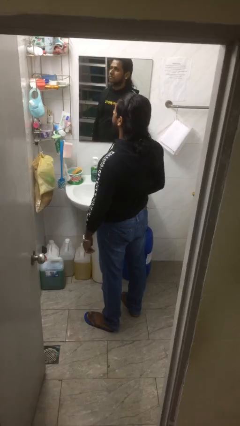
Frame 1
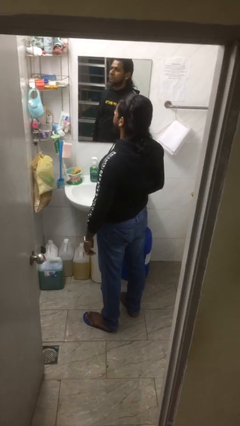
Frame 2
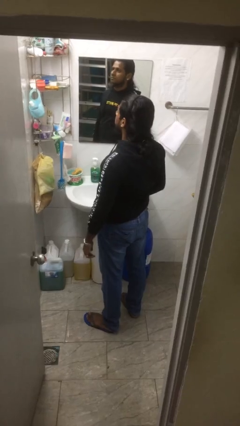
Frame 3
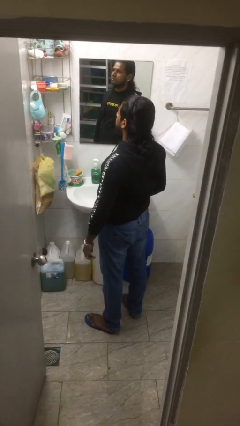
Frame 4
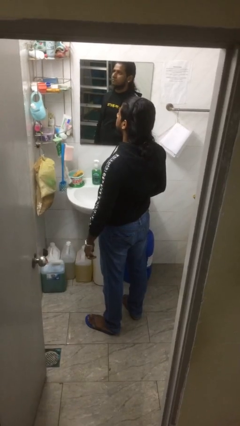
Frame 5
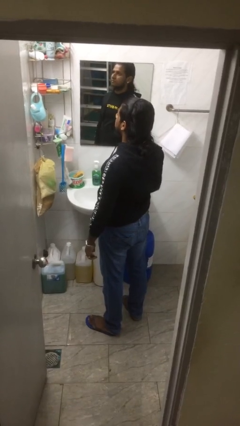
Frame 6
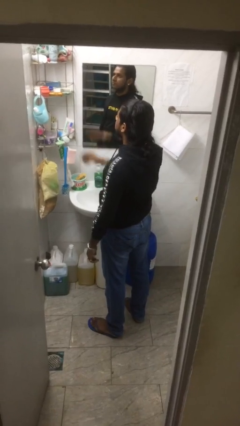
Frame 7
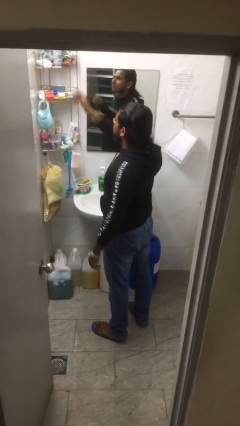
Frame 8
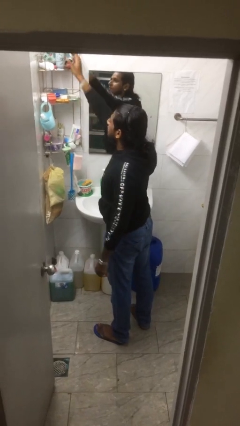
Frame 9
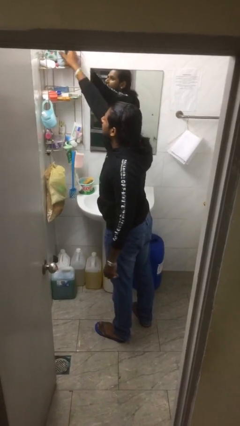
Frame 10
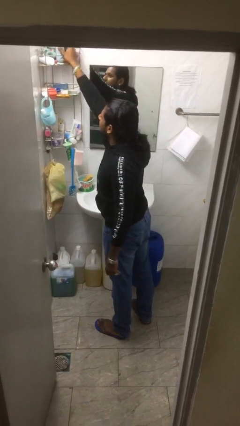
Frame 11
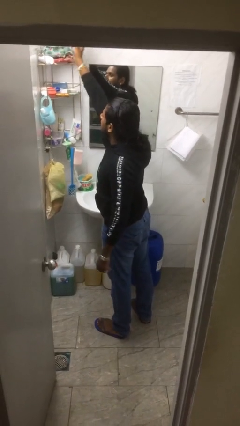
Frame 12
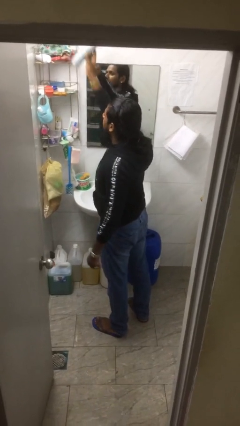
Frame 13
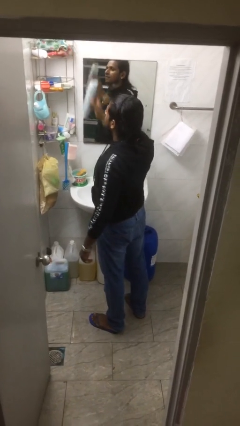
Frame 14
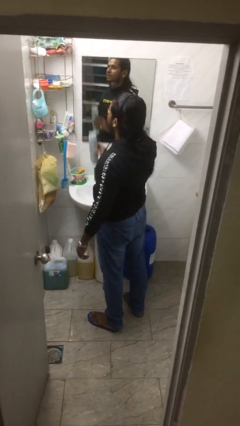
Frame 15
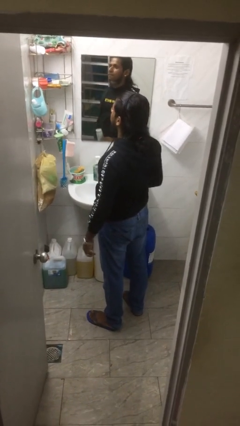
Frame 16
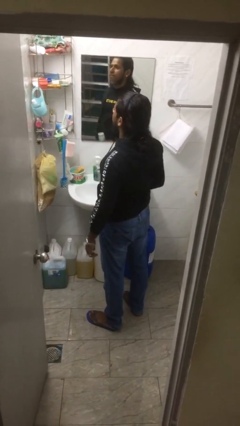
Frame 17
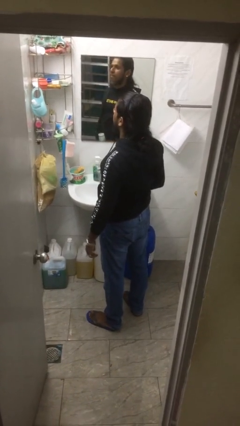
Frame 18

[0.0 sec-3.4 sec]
person picks up object from countertop

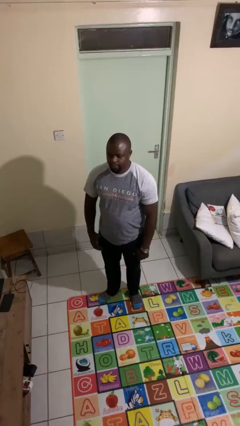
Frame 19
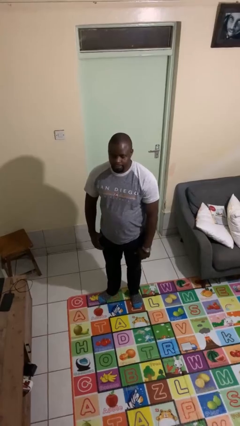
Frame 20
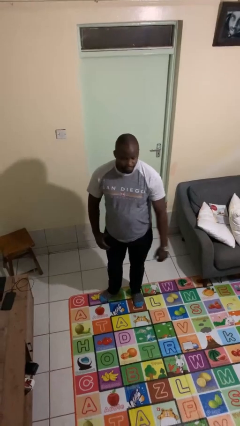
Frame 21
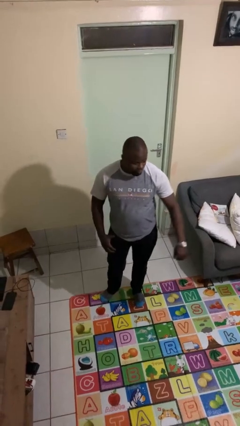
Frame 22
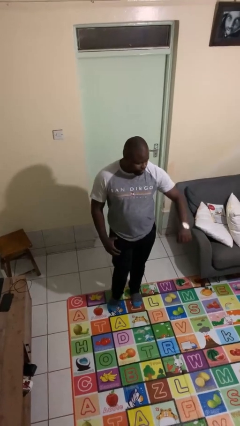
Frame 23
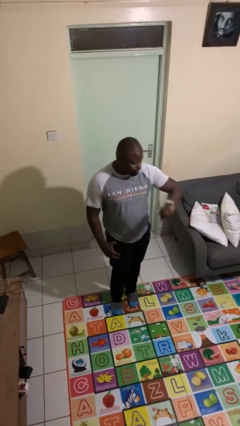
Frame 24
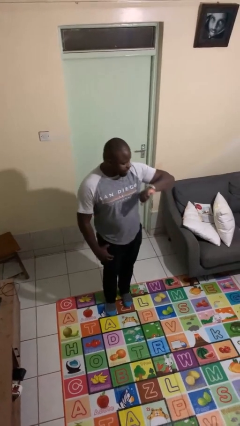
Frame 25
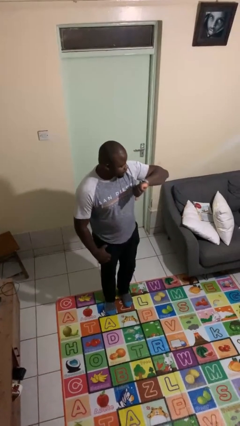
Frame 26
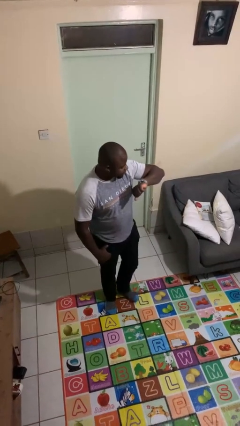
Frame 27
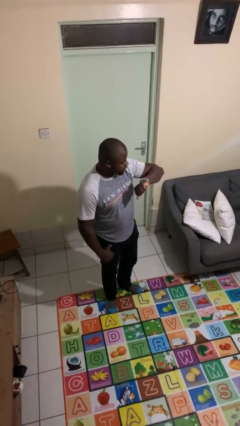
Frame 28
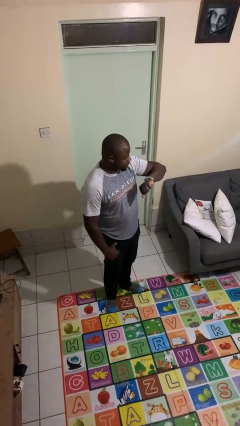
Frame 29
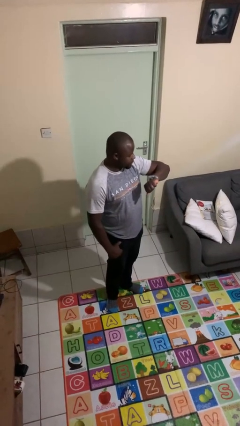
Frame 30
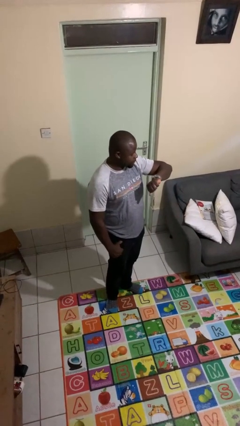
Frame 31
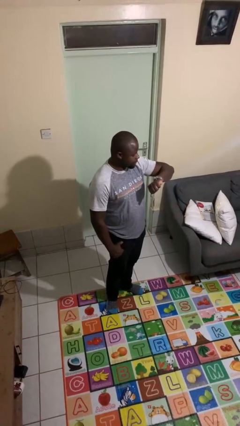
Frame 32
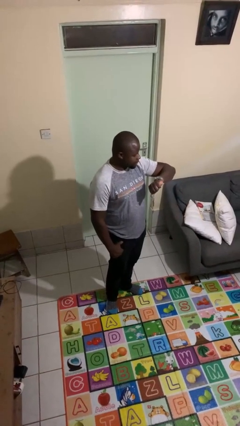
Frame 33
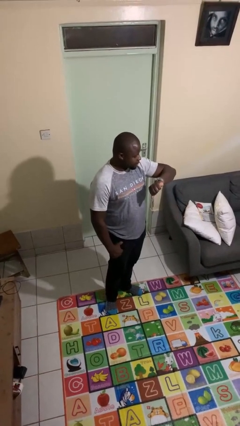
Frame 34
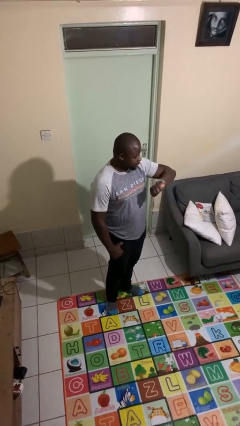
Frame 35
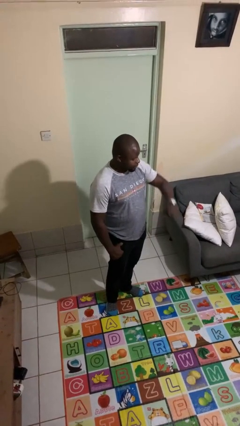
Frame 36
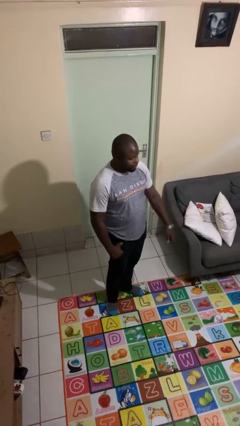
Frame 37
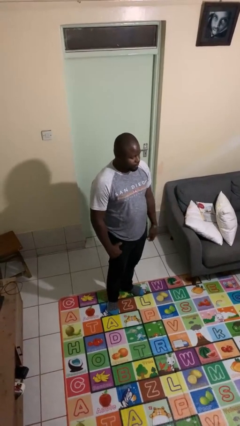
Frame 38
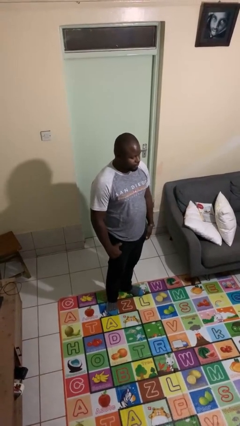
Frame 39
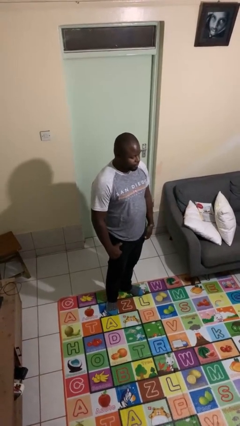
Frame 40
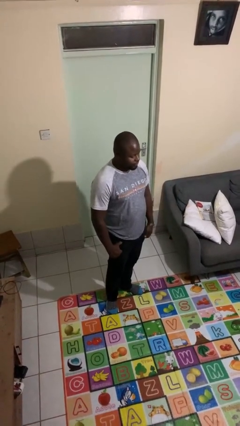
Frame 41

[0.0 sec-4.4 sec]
person looks at wristwatch

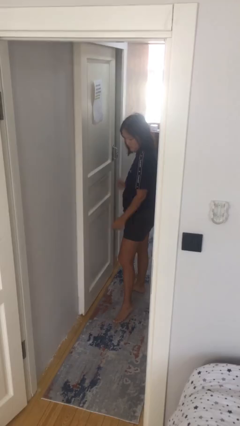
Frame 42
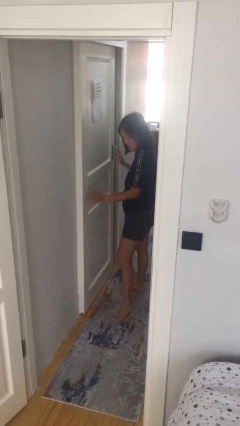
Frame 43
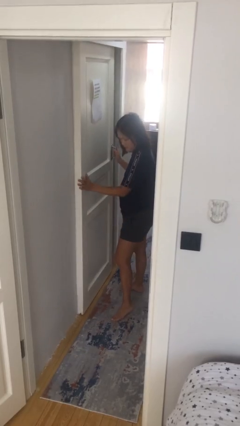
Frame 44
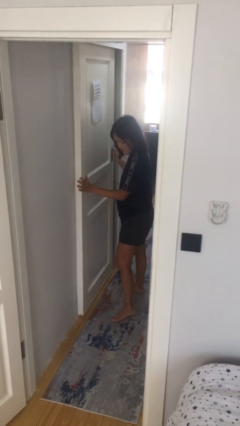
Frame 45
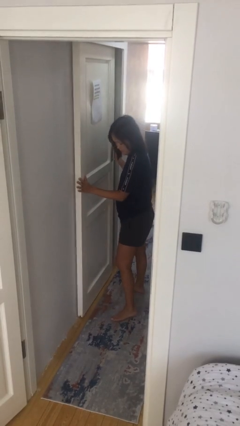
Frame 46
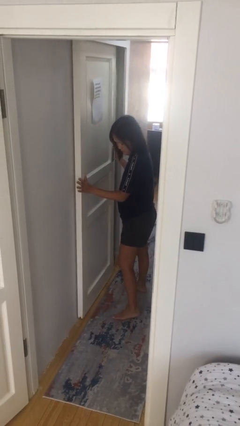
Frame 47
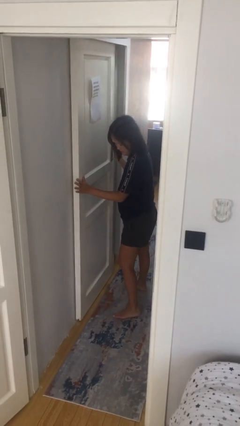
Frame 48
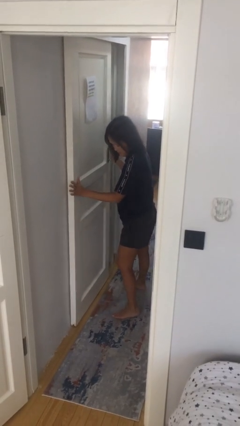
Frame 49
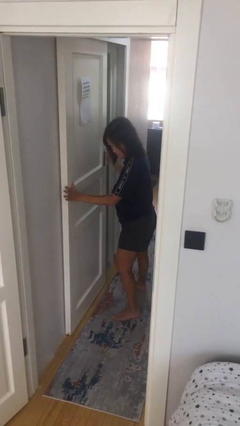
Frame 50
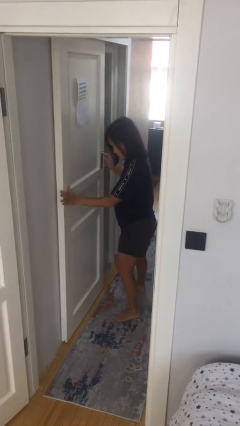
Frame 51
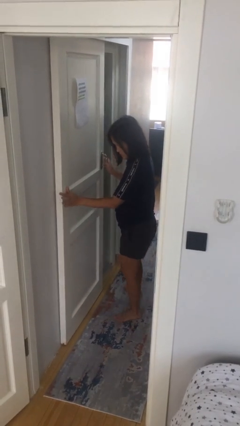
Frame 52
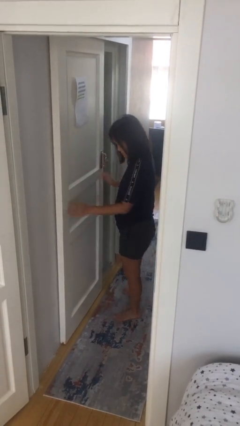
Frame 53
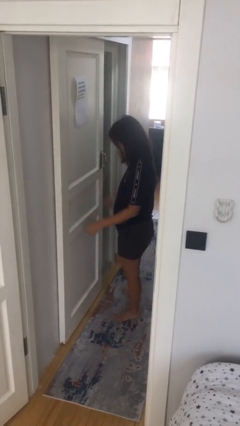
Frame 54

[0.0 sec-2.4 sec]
person opens sliding door

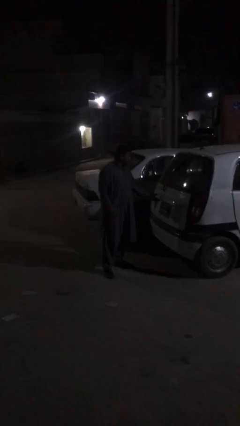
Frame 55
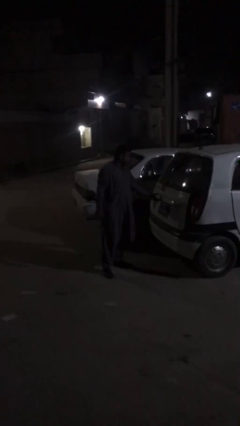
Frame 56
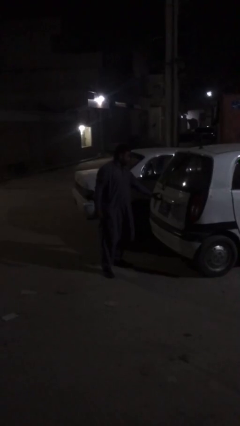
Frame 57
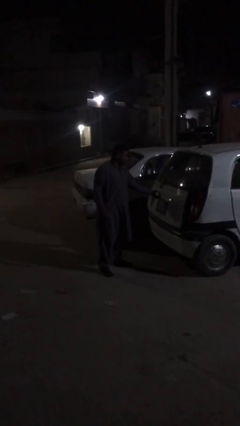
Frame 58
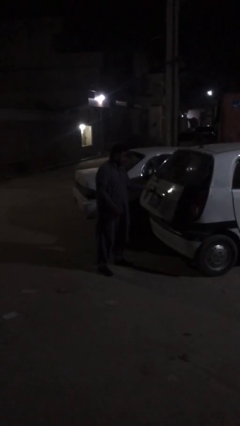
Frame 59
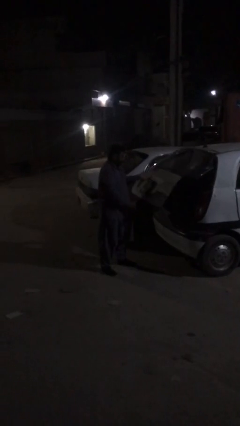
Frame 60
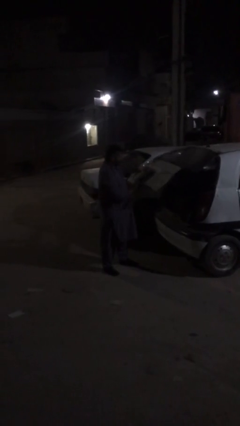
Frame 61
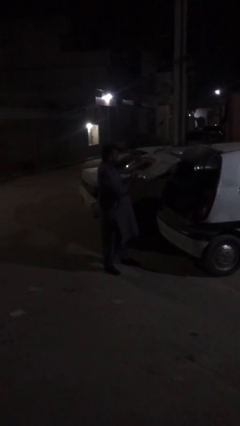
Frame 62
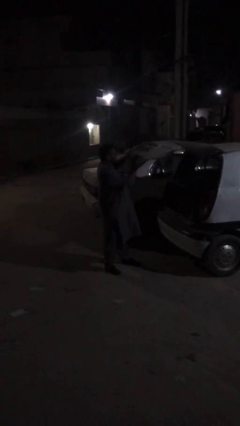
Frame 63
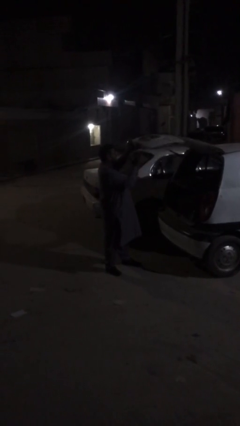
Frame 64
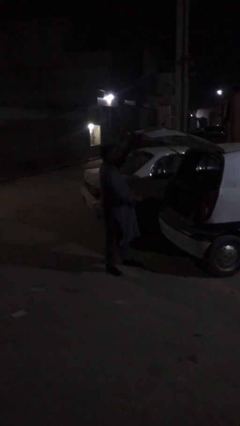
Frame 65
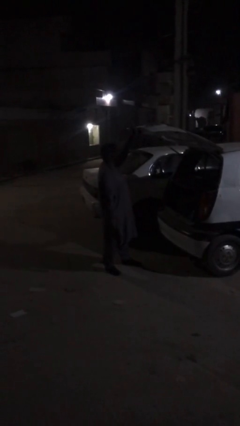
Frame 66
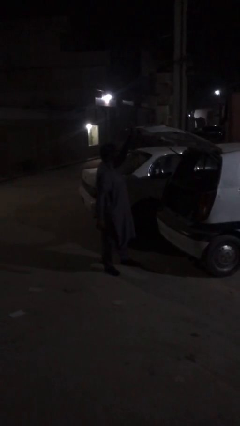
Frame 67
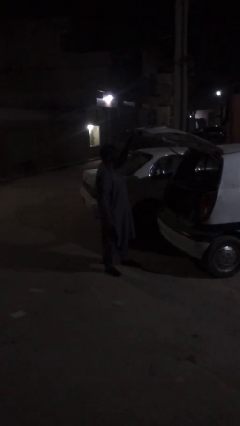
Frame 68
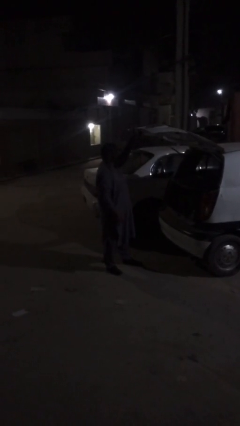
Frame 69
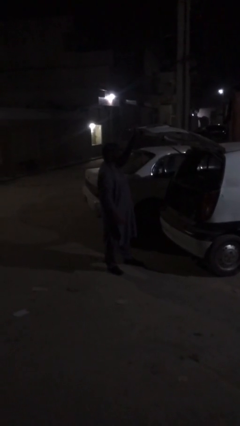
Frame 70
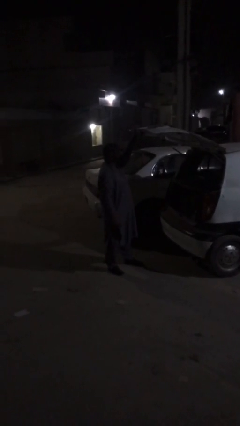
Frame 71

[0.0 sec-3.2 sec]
person opens car trunk

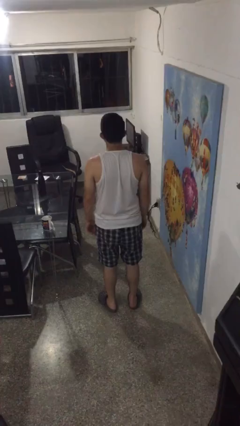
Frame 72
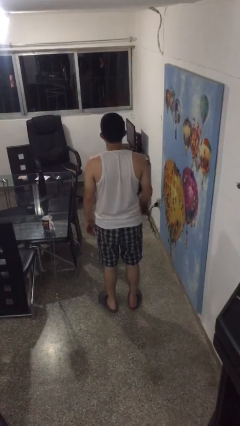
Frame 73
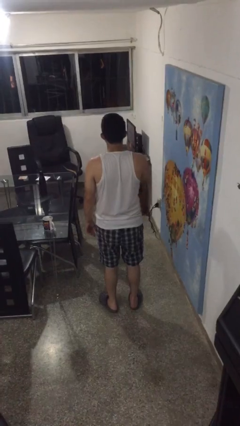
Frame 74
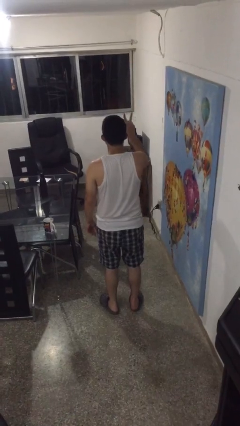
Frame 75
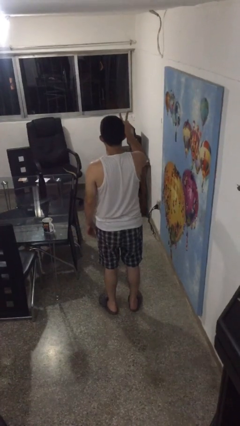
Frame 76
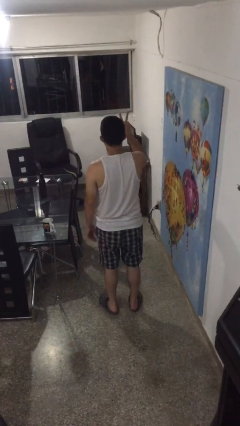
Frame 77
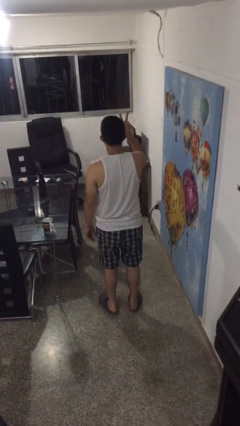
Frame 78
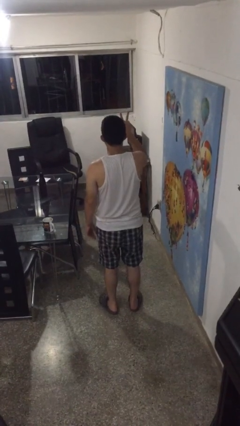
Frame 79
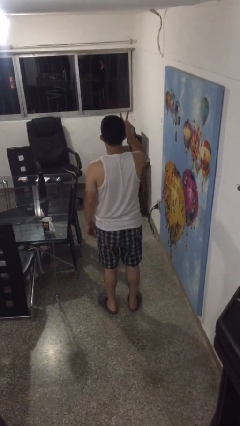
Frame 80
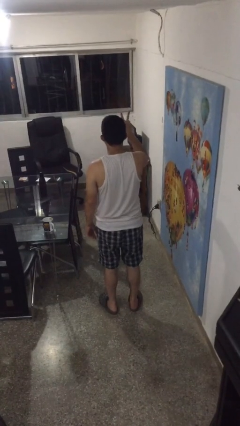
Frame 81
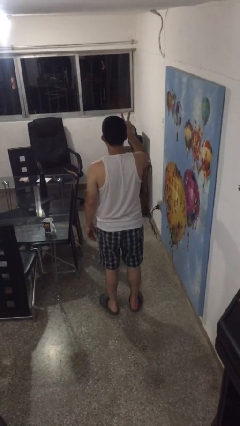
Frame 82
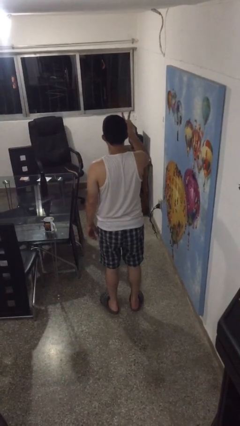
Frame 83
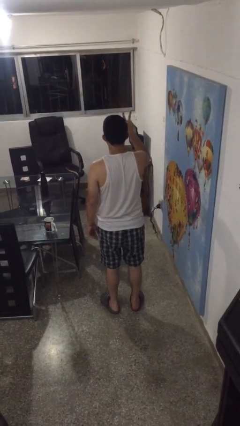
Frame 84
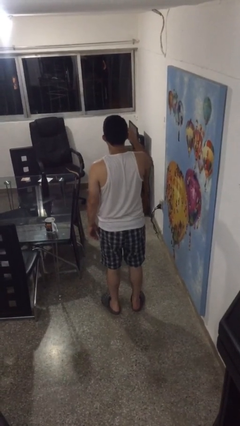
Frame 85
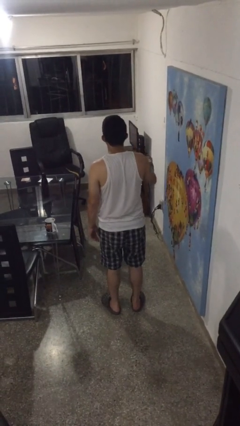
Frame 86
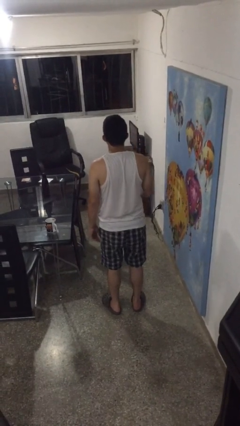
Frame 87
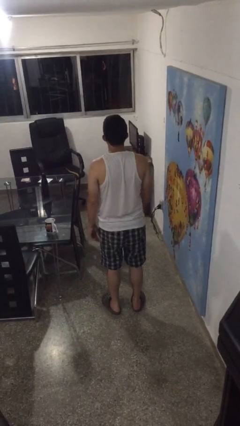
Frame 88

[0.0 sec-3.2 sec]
person gestures peace

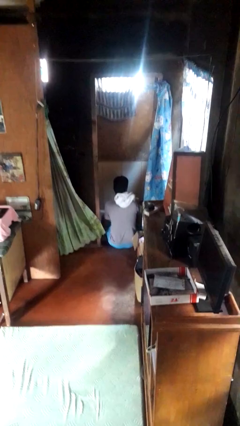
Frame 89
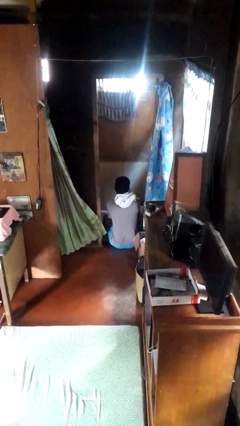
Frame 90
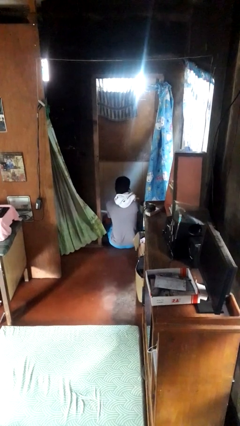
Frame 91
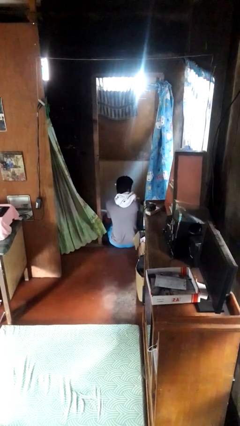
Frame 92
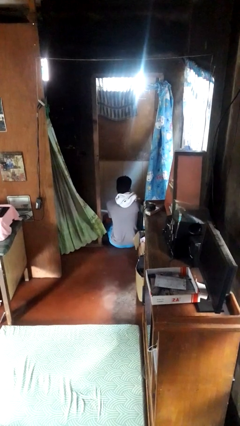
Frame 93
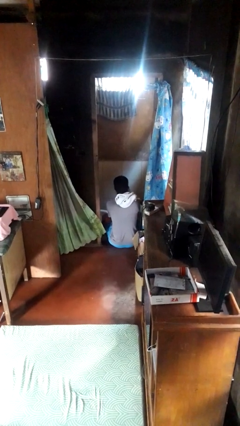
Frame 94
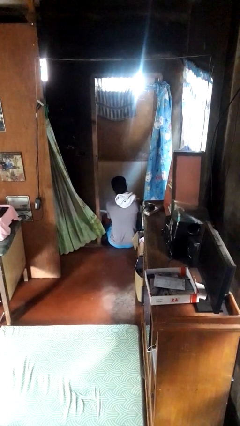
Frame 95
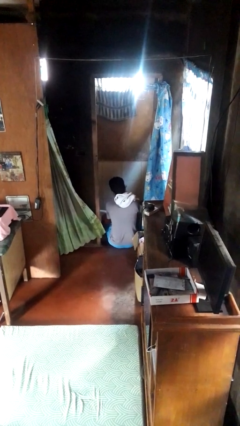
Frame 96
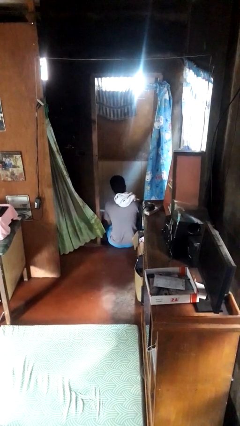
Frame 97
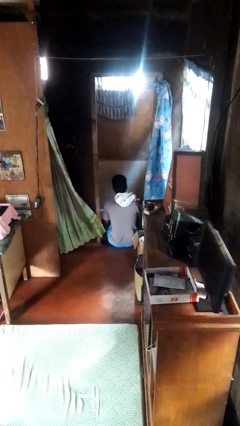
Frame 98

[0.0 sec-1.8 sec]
person dries face with towel
